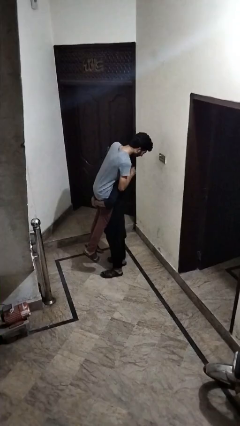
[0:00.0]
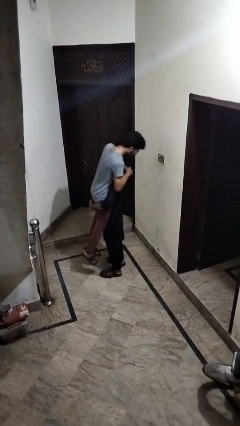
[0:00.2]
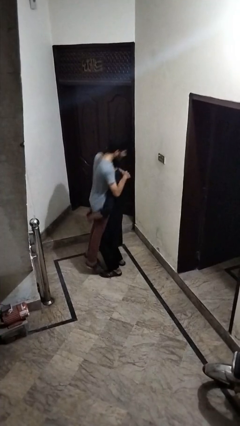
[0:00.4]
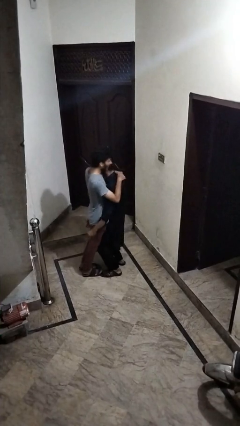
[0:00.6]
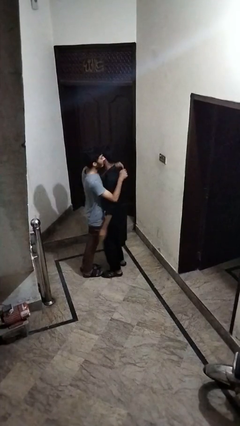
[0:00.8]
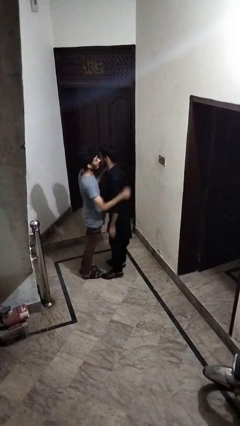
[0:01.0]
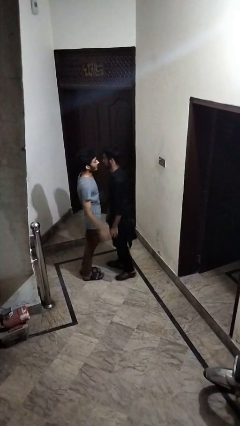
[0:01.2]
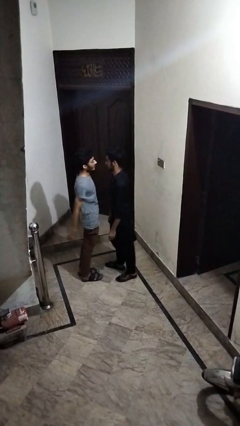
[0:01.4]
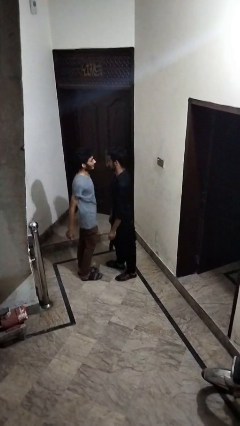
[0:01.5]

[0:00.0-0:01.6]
person puts down person

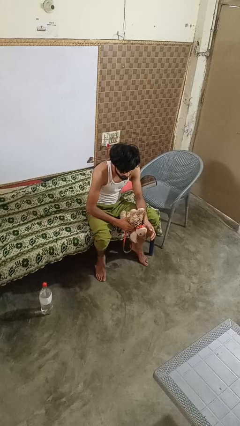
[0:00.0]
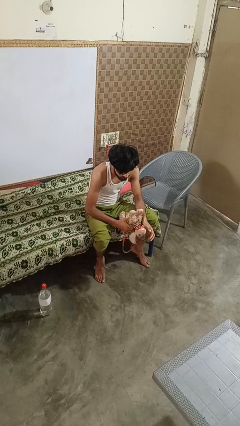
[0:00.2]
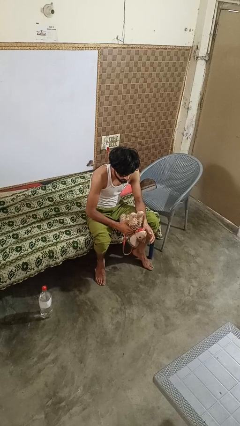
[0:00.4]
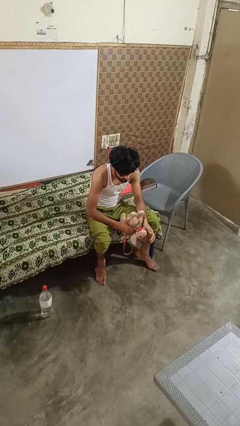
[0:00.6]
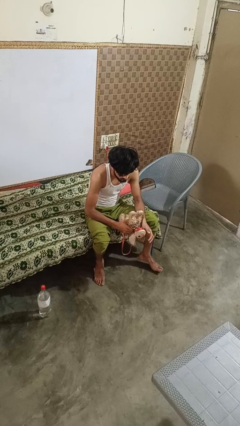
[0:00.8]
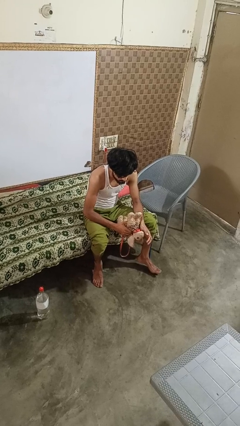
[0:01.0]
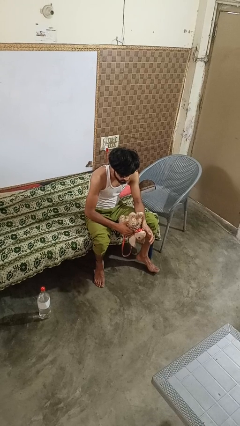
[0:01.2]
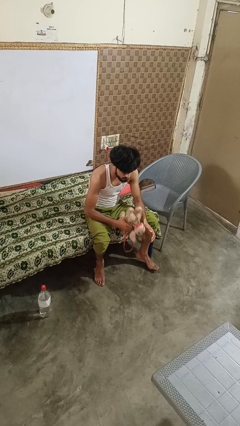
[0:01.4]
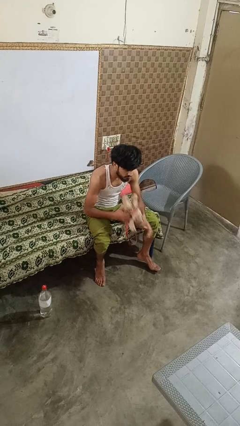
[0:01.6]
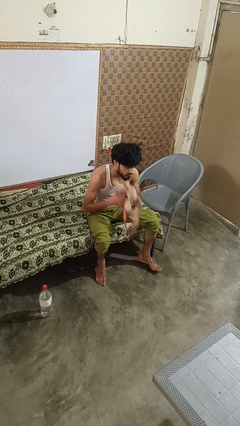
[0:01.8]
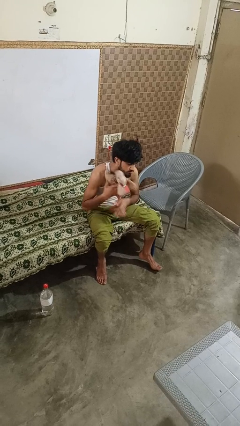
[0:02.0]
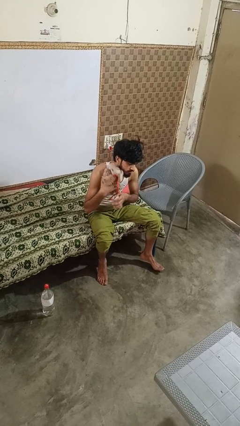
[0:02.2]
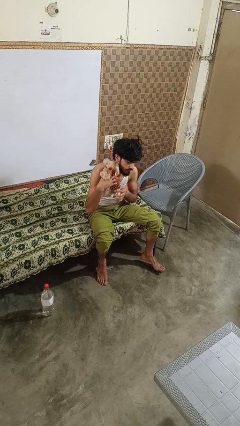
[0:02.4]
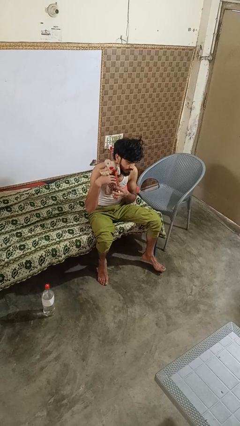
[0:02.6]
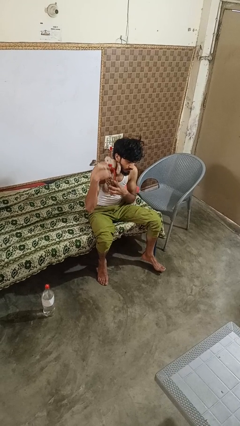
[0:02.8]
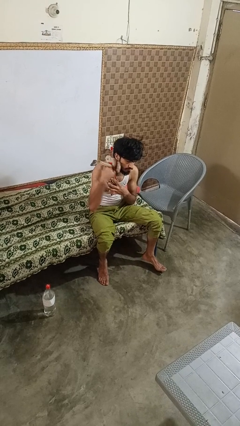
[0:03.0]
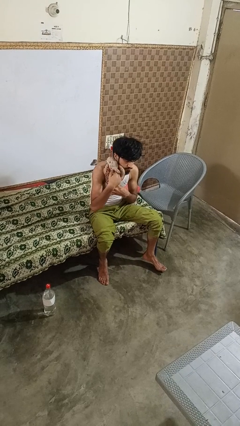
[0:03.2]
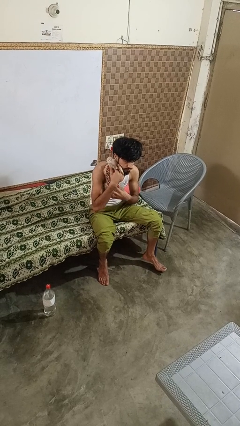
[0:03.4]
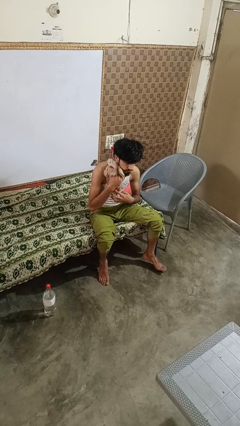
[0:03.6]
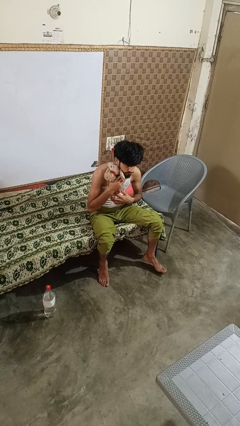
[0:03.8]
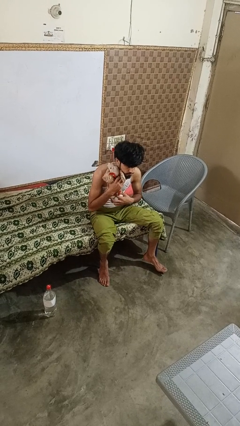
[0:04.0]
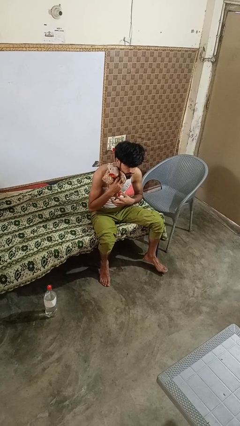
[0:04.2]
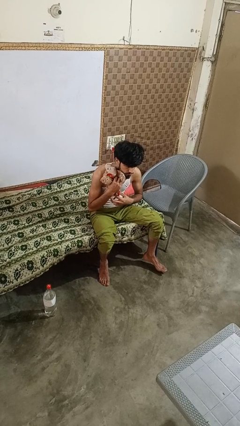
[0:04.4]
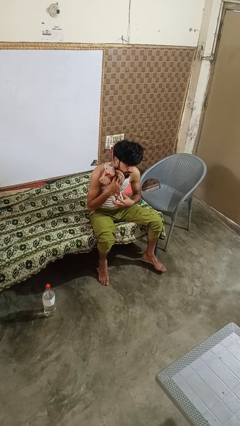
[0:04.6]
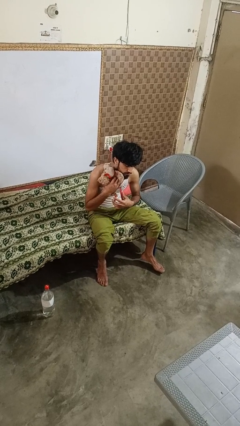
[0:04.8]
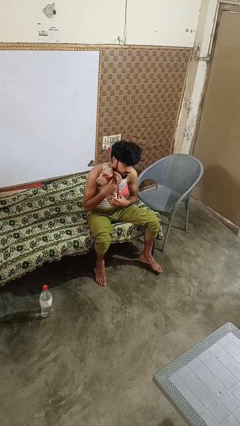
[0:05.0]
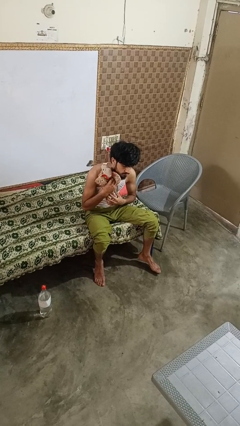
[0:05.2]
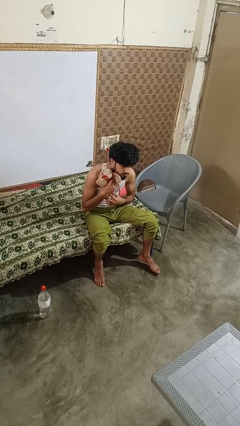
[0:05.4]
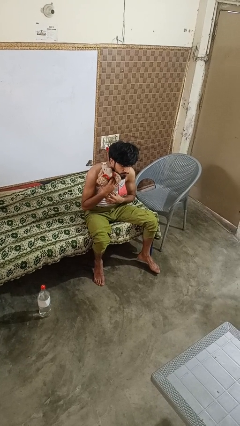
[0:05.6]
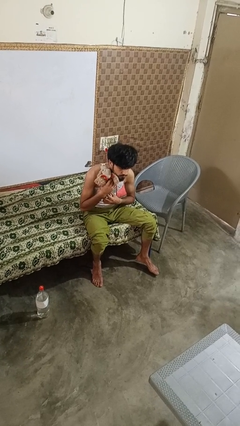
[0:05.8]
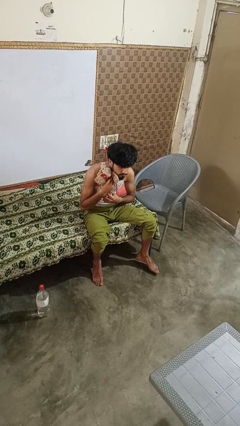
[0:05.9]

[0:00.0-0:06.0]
person hugs stuffed animal

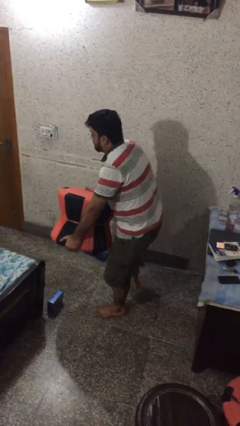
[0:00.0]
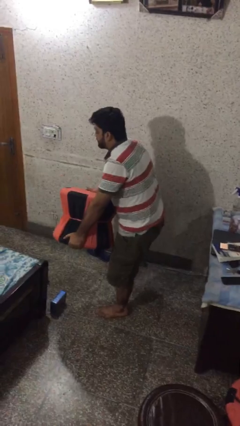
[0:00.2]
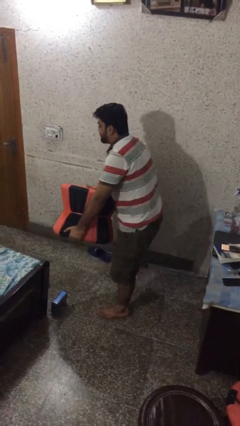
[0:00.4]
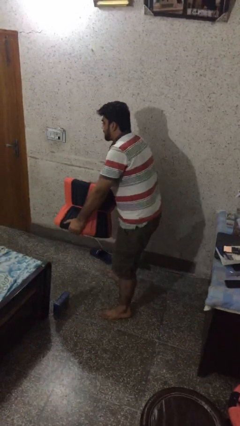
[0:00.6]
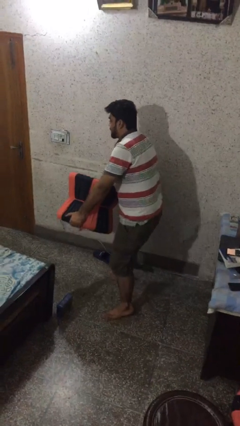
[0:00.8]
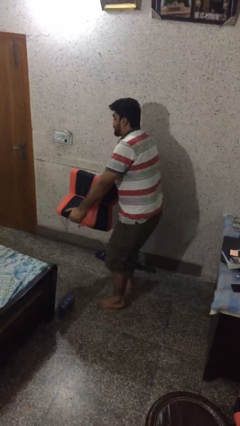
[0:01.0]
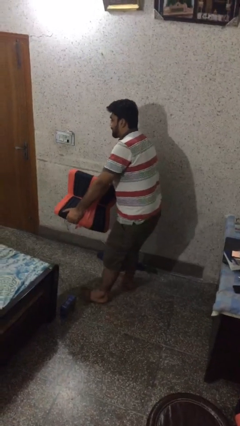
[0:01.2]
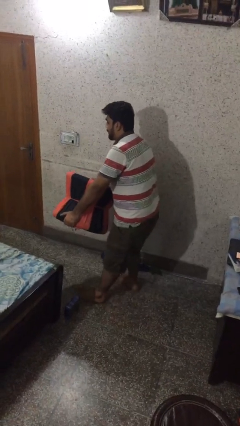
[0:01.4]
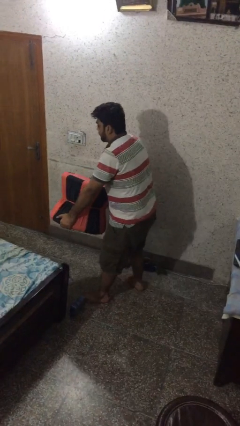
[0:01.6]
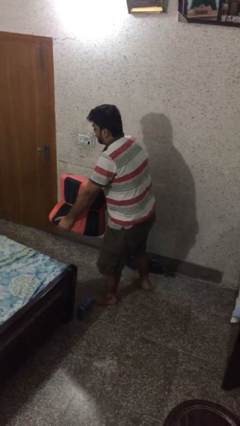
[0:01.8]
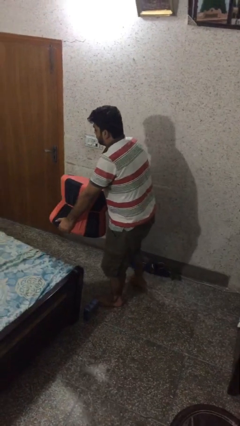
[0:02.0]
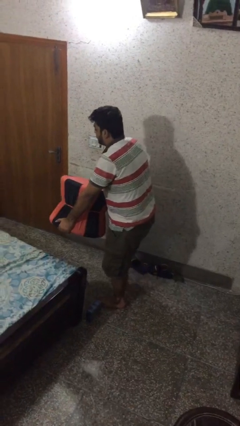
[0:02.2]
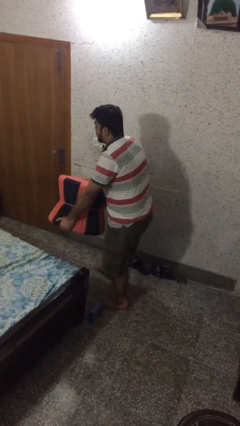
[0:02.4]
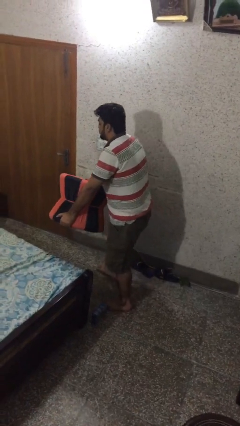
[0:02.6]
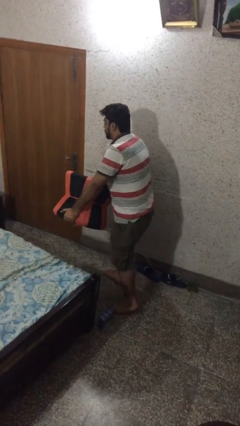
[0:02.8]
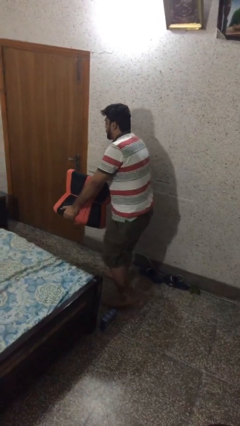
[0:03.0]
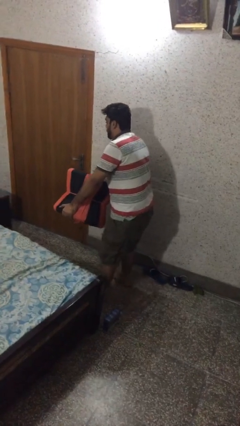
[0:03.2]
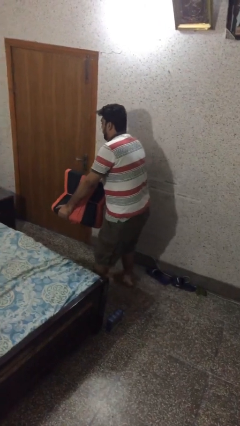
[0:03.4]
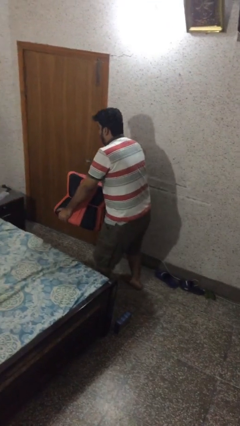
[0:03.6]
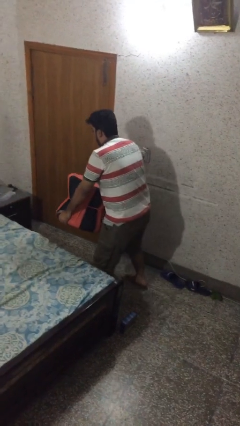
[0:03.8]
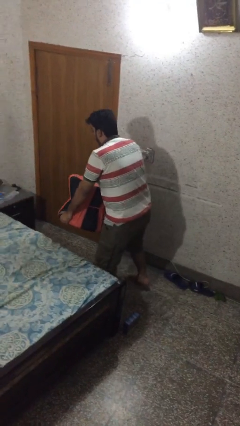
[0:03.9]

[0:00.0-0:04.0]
person carries heavy object

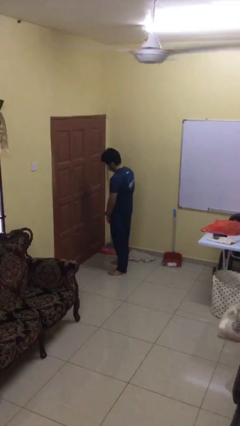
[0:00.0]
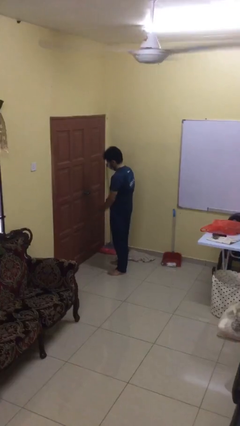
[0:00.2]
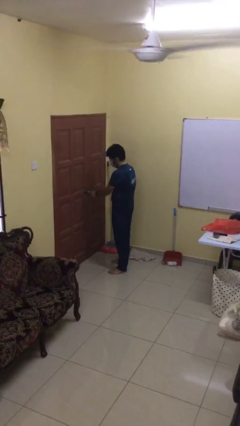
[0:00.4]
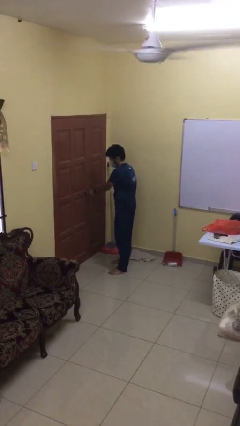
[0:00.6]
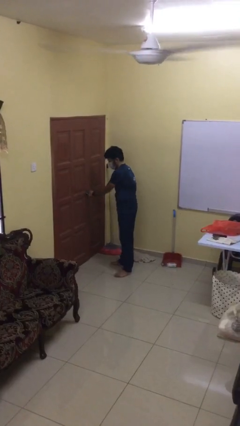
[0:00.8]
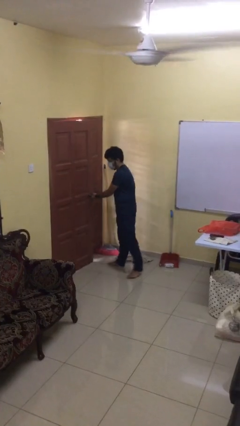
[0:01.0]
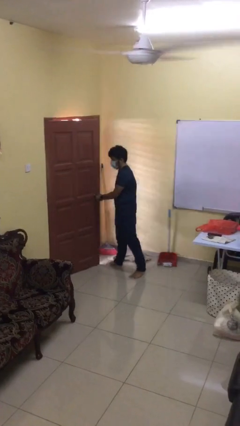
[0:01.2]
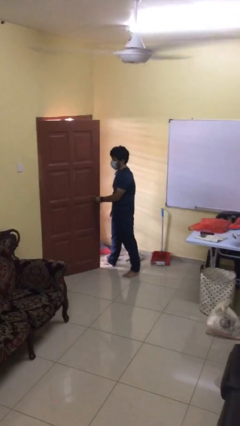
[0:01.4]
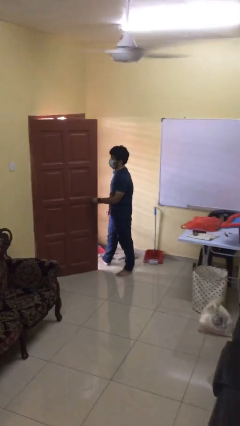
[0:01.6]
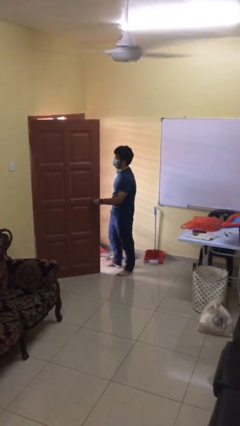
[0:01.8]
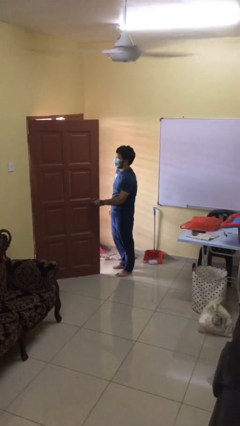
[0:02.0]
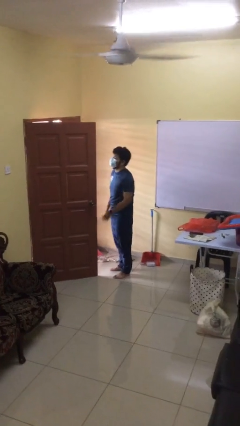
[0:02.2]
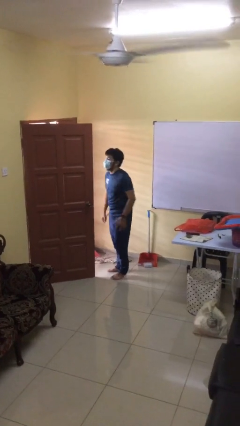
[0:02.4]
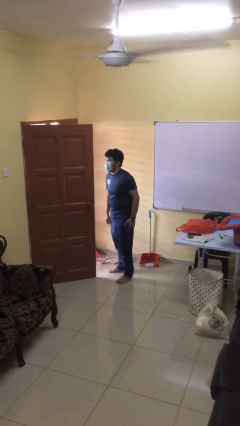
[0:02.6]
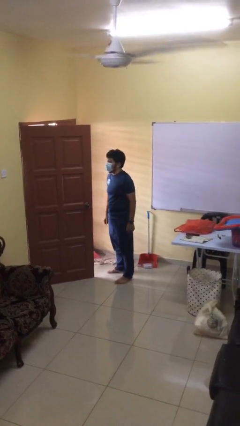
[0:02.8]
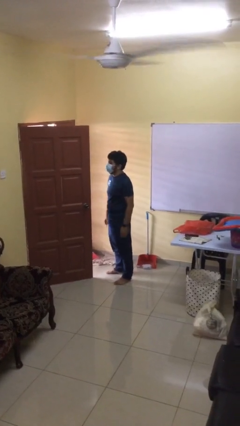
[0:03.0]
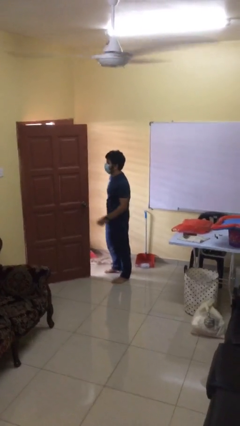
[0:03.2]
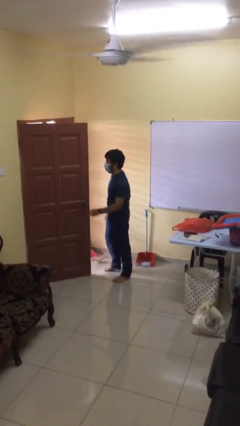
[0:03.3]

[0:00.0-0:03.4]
person opens facility door

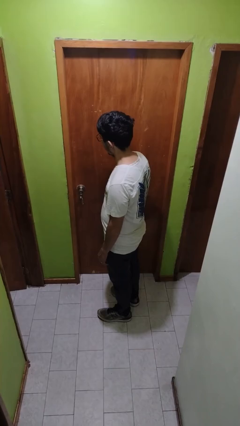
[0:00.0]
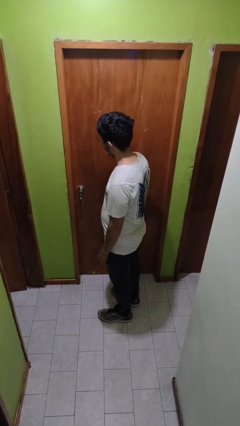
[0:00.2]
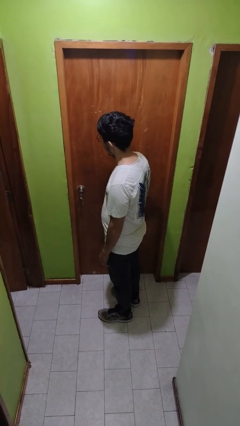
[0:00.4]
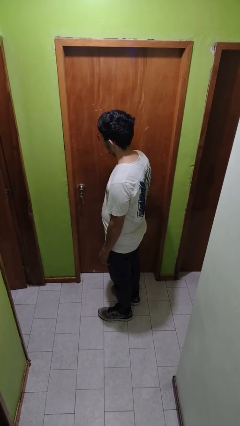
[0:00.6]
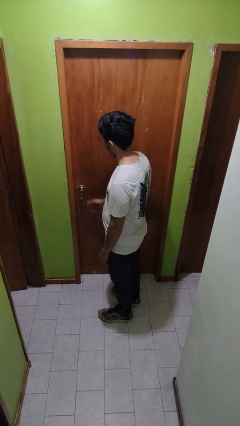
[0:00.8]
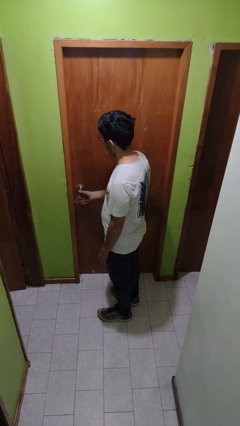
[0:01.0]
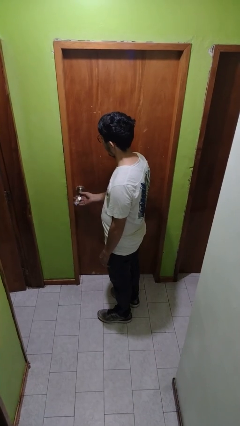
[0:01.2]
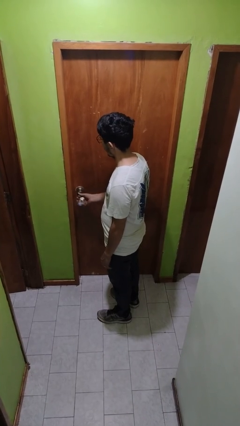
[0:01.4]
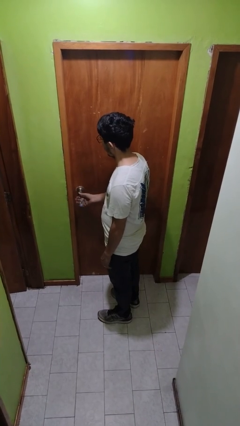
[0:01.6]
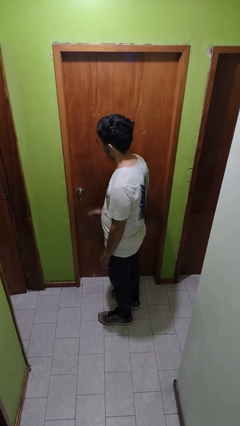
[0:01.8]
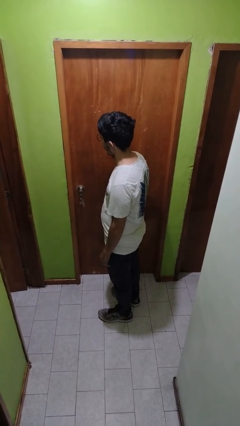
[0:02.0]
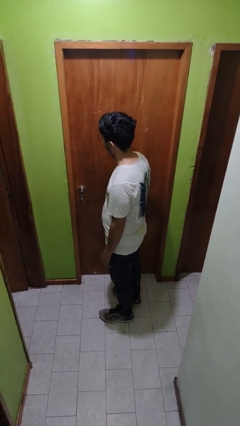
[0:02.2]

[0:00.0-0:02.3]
person locks door with keys
